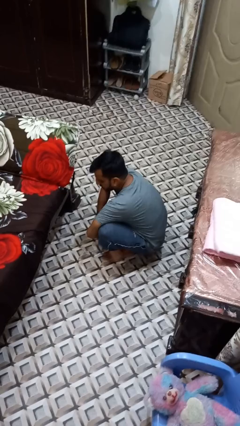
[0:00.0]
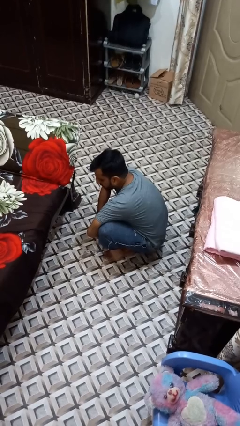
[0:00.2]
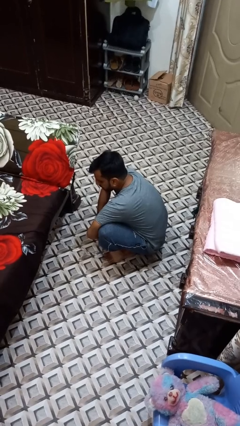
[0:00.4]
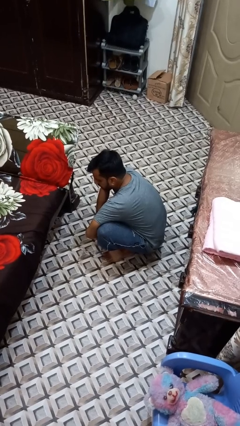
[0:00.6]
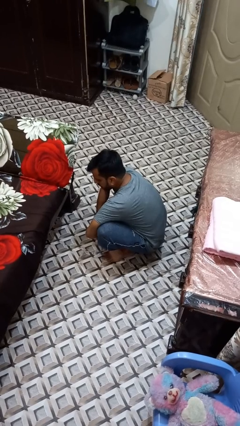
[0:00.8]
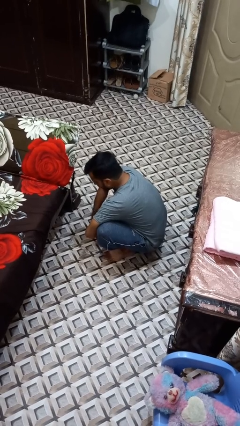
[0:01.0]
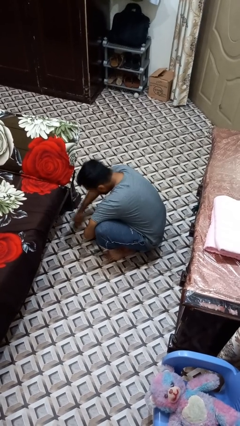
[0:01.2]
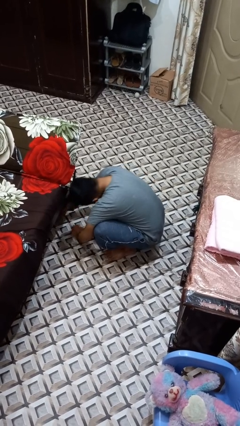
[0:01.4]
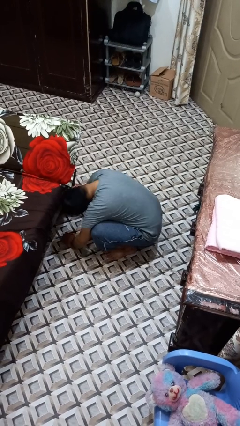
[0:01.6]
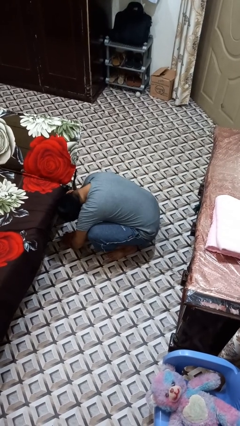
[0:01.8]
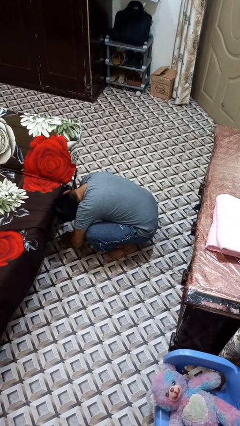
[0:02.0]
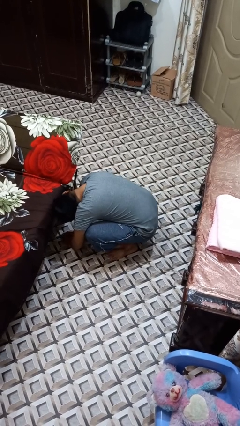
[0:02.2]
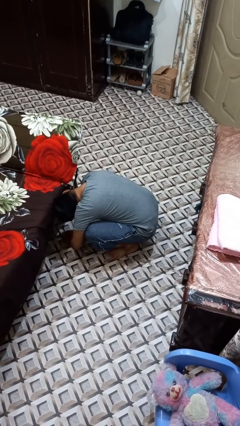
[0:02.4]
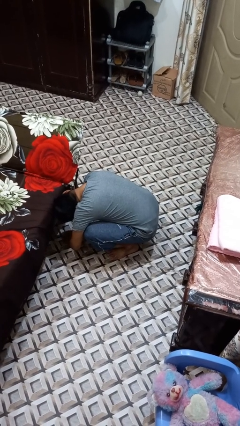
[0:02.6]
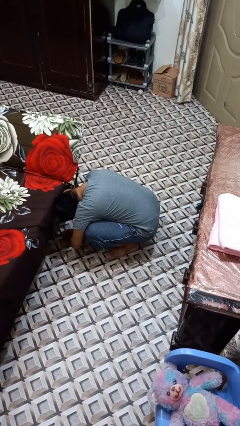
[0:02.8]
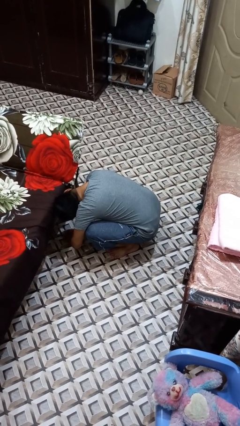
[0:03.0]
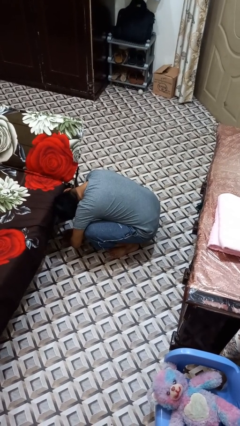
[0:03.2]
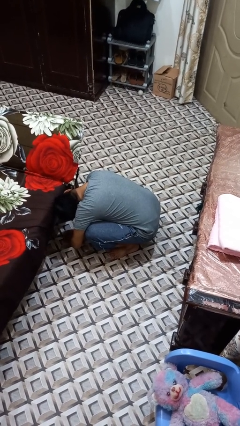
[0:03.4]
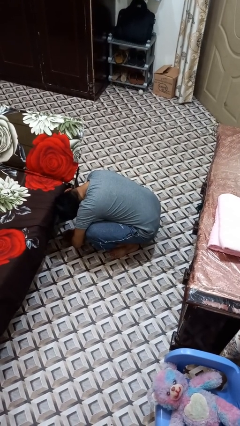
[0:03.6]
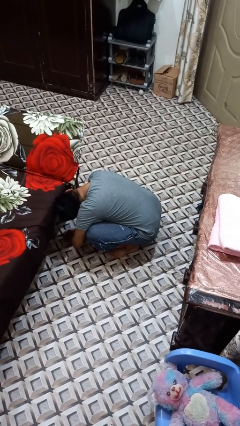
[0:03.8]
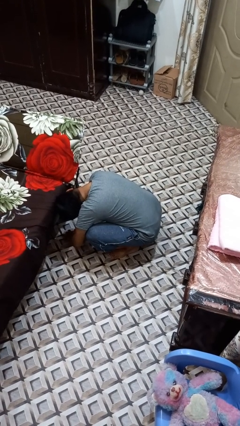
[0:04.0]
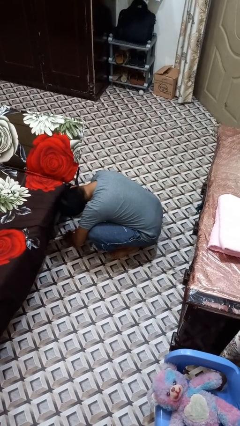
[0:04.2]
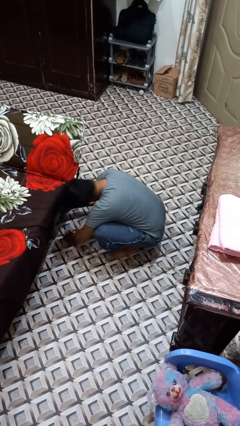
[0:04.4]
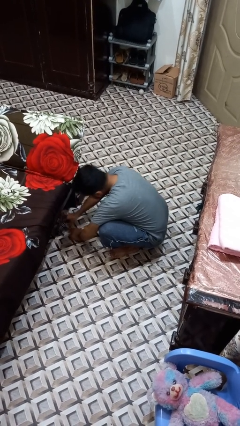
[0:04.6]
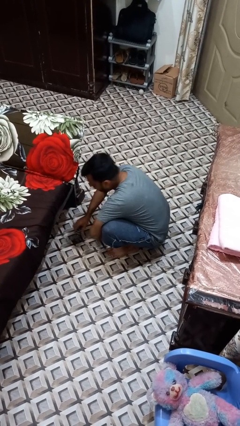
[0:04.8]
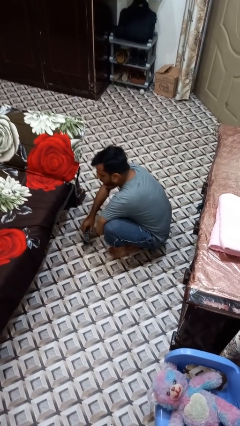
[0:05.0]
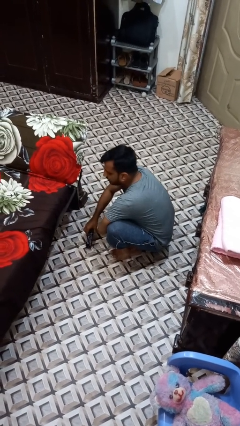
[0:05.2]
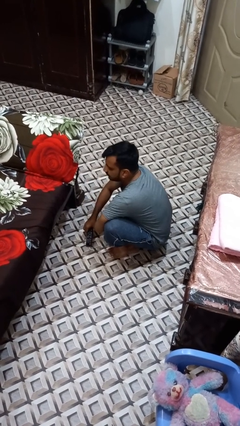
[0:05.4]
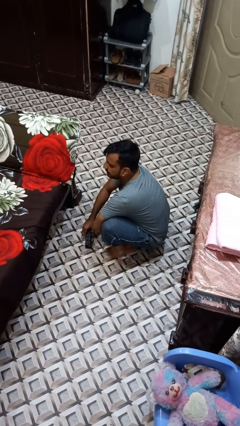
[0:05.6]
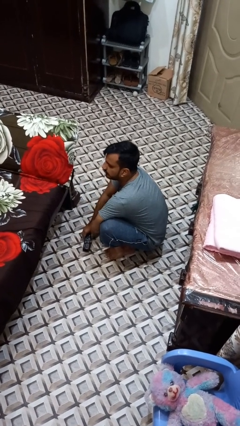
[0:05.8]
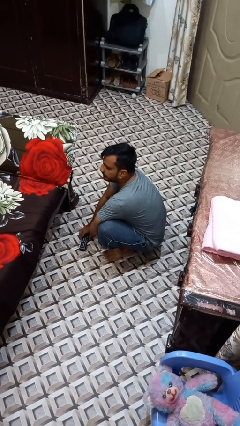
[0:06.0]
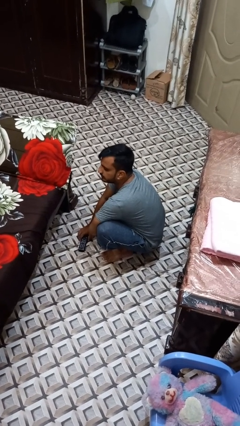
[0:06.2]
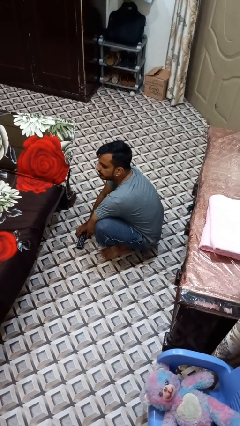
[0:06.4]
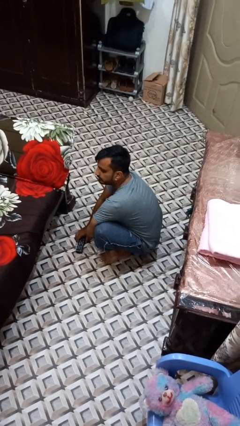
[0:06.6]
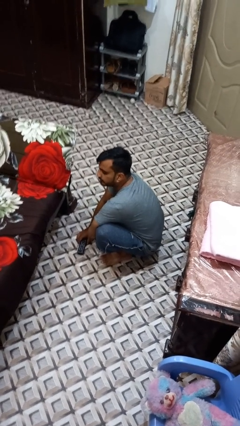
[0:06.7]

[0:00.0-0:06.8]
person searches under couch

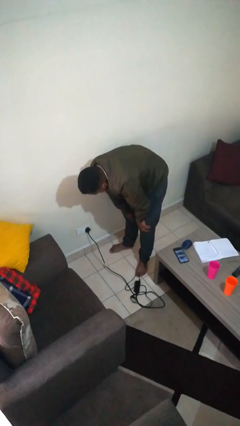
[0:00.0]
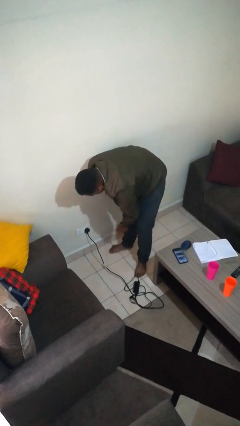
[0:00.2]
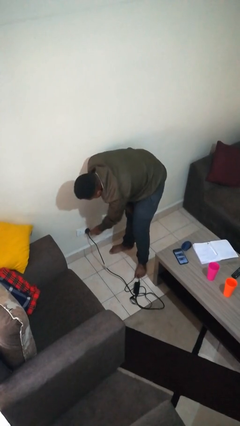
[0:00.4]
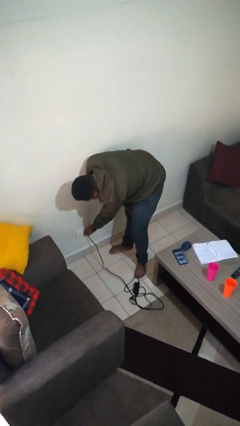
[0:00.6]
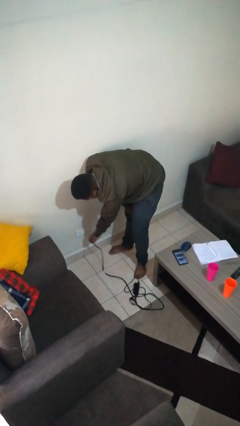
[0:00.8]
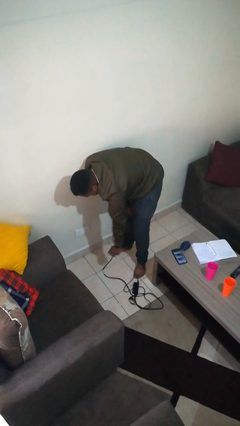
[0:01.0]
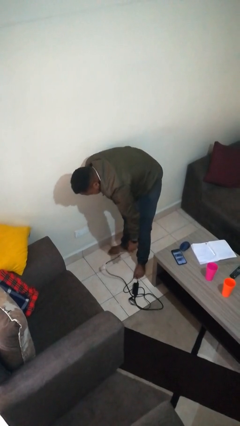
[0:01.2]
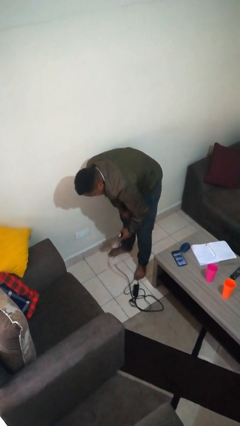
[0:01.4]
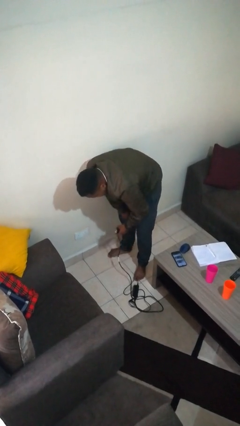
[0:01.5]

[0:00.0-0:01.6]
person unplugs from electrical socket

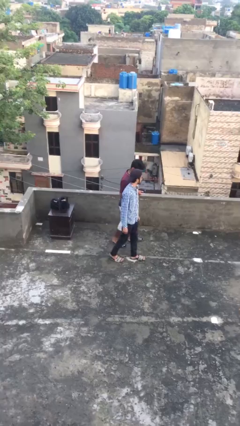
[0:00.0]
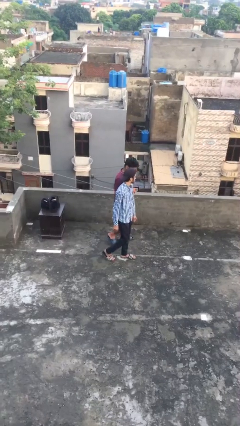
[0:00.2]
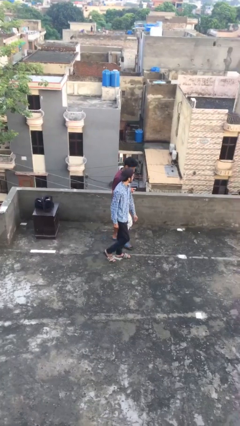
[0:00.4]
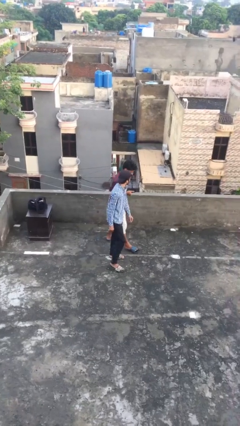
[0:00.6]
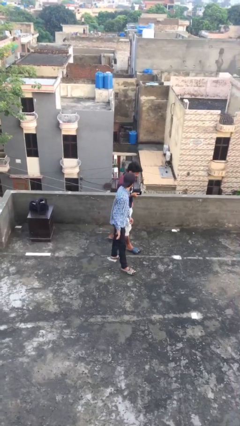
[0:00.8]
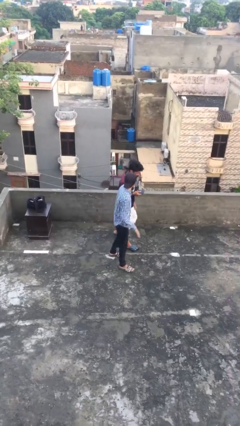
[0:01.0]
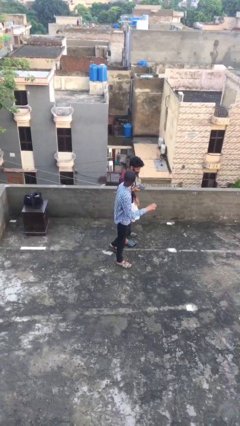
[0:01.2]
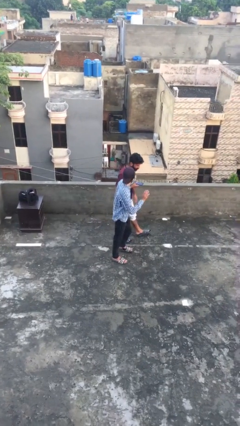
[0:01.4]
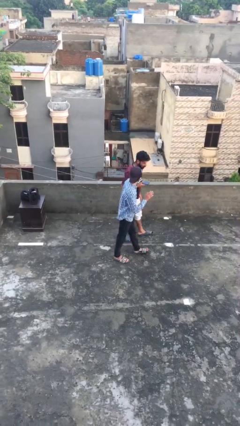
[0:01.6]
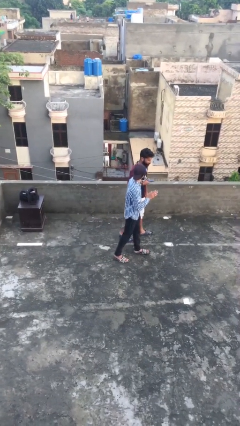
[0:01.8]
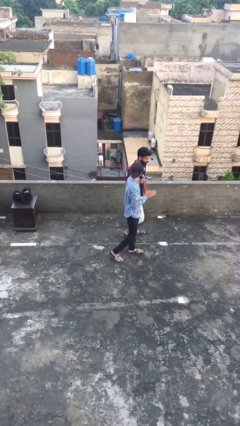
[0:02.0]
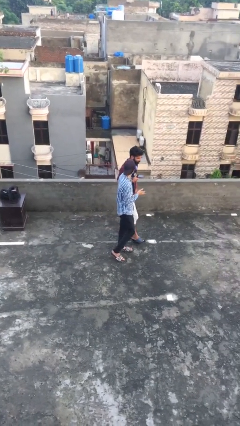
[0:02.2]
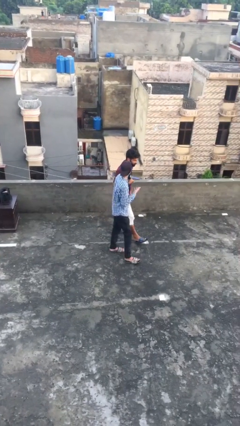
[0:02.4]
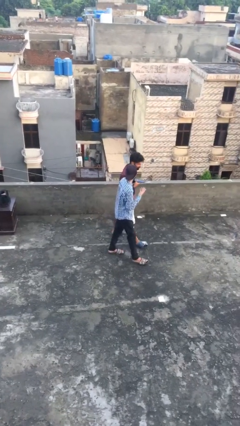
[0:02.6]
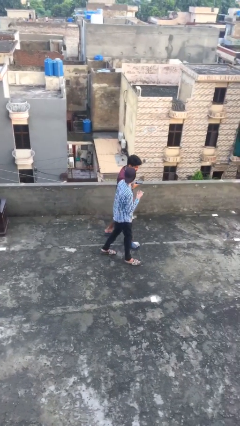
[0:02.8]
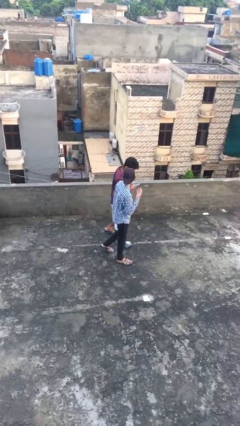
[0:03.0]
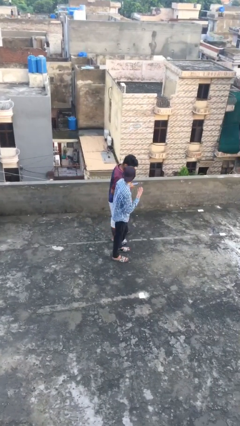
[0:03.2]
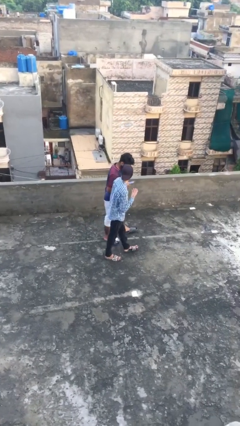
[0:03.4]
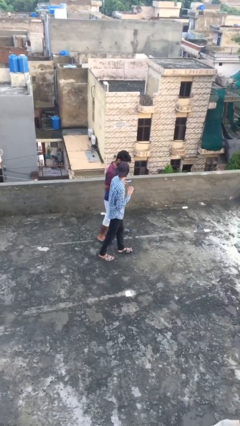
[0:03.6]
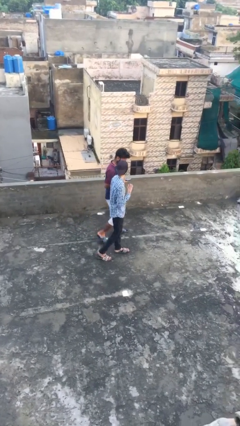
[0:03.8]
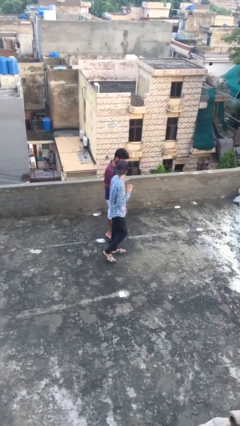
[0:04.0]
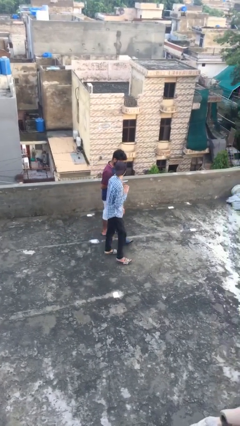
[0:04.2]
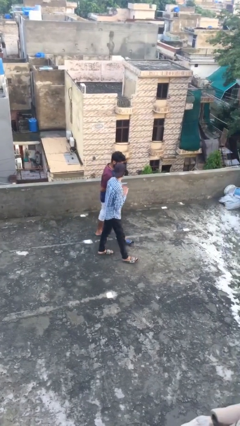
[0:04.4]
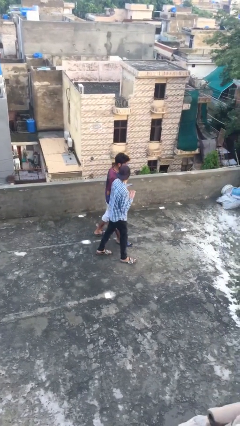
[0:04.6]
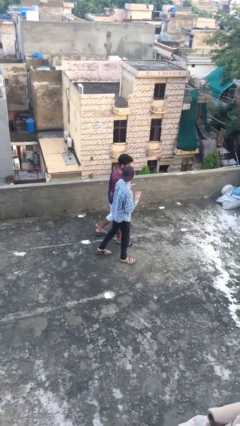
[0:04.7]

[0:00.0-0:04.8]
person talks to person

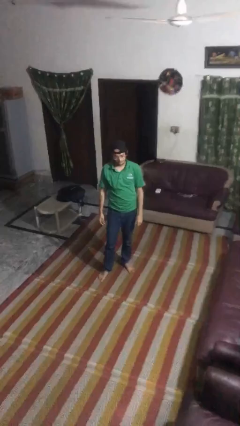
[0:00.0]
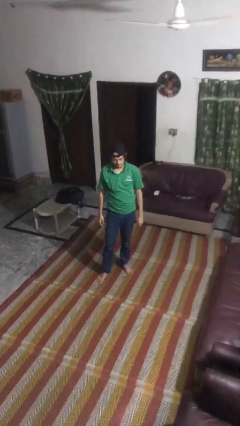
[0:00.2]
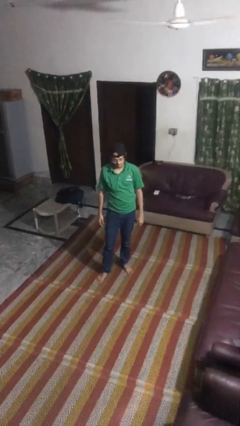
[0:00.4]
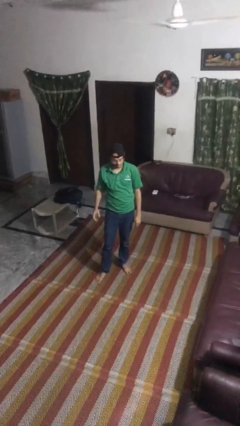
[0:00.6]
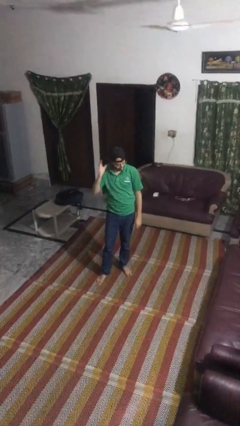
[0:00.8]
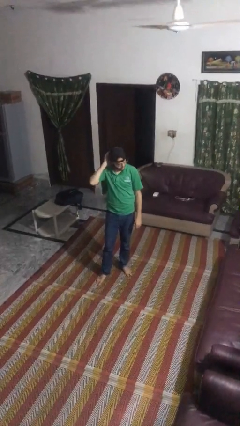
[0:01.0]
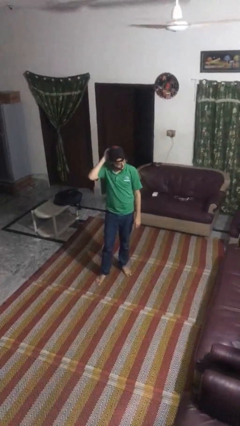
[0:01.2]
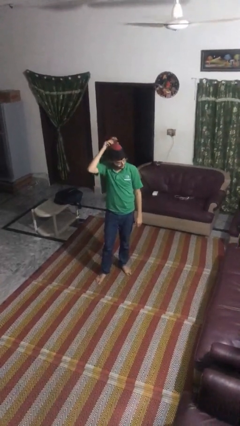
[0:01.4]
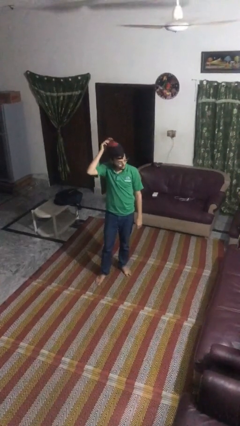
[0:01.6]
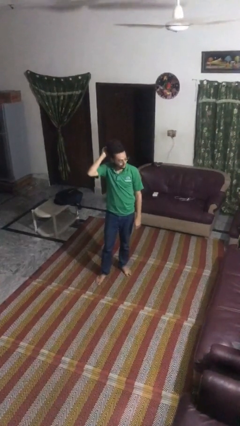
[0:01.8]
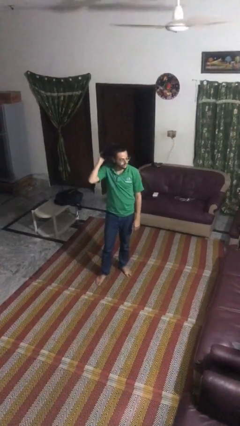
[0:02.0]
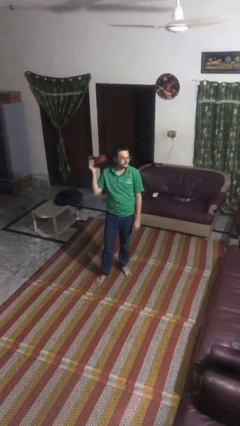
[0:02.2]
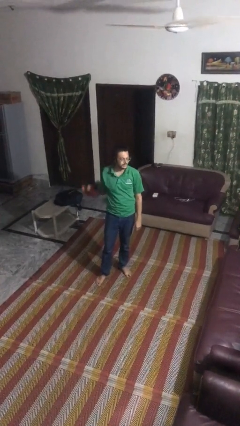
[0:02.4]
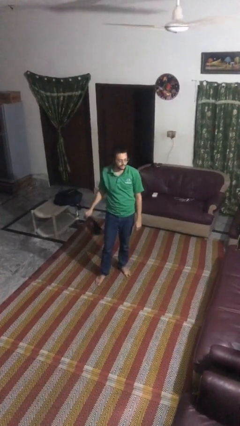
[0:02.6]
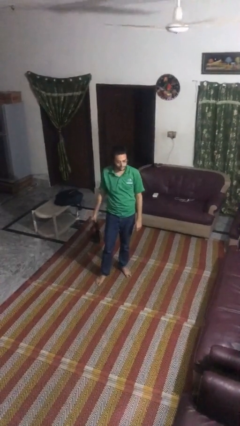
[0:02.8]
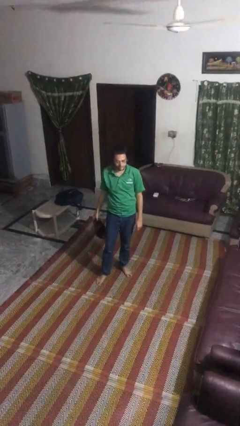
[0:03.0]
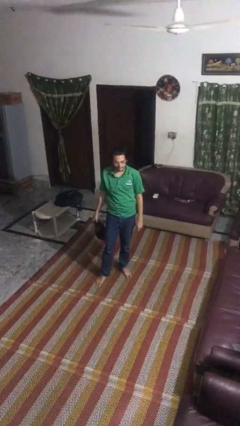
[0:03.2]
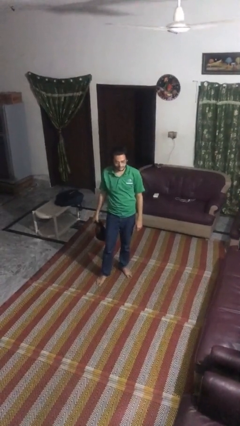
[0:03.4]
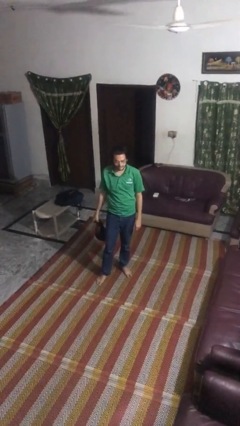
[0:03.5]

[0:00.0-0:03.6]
person takes off hat

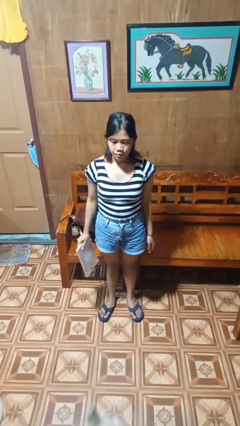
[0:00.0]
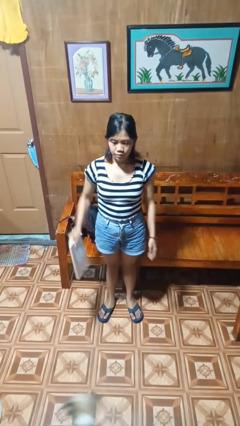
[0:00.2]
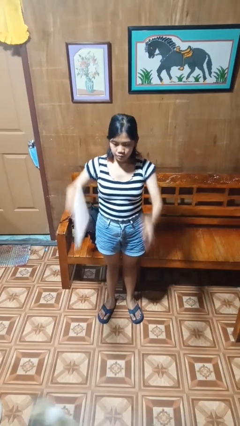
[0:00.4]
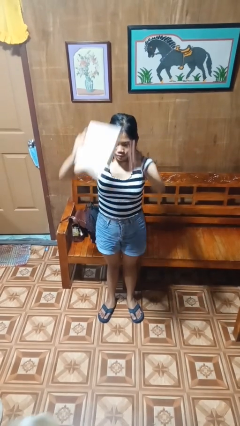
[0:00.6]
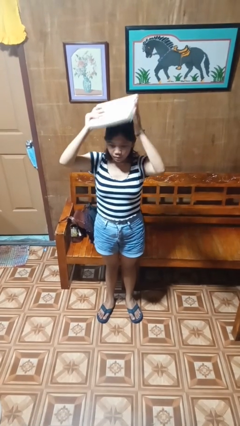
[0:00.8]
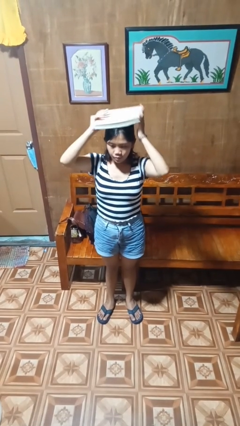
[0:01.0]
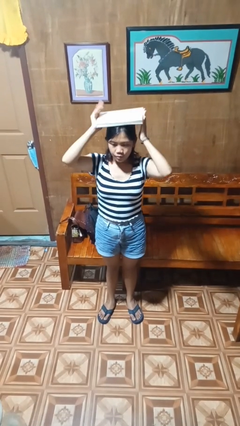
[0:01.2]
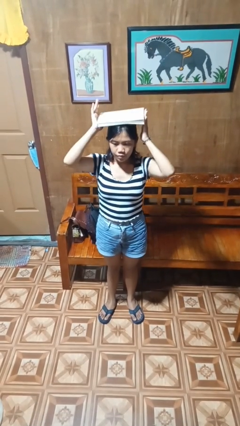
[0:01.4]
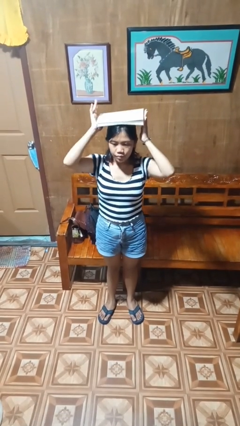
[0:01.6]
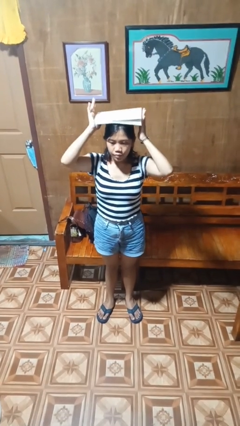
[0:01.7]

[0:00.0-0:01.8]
person holds object above head
